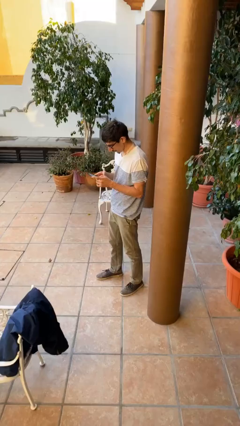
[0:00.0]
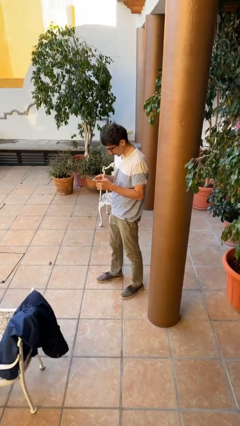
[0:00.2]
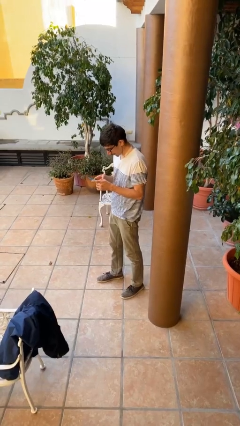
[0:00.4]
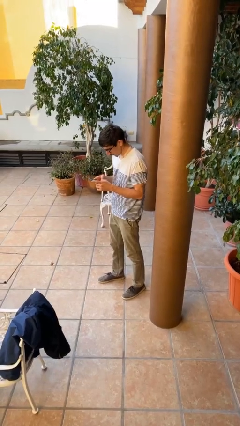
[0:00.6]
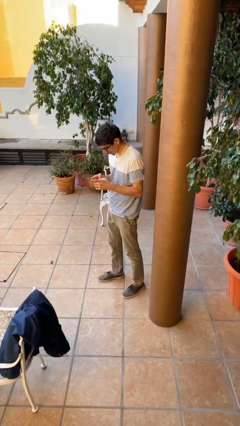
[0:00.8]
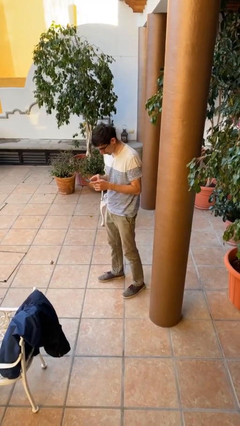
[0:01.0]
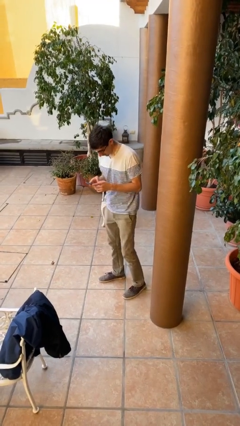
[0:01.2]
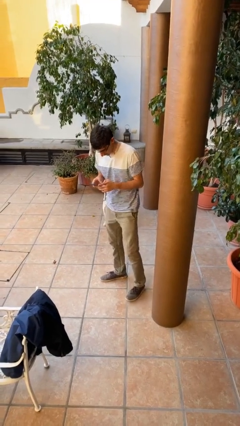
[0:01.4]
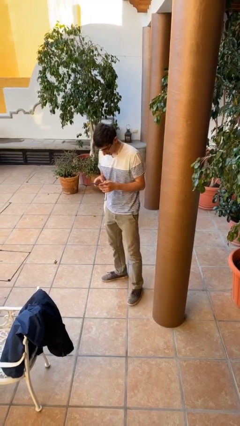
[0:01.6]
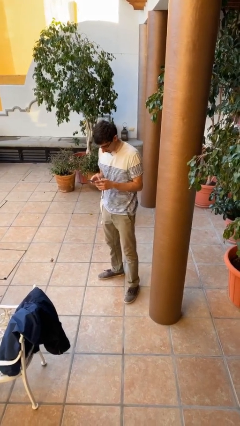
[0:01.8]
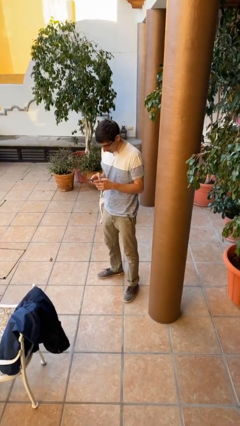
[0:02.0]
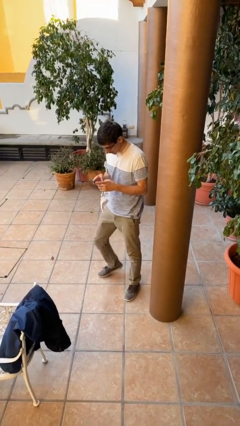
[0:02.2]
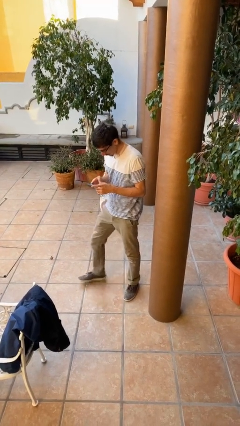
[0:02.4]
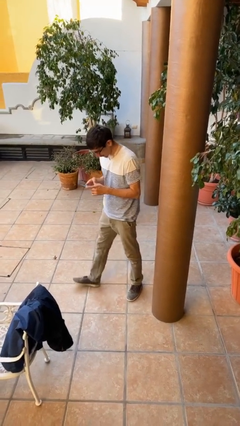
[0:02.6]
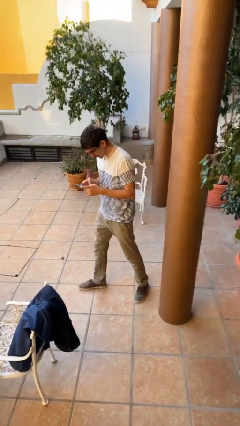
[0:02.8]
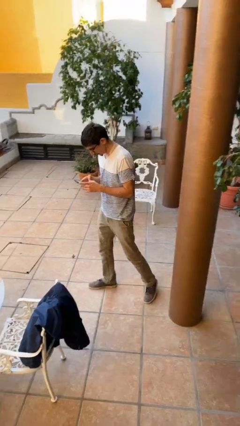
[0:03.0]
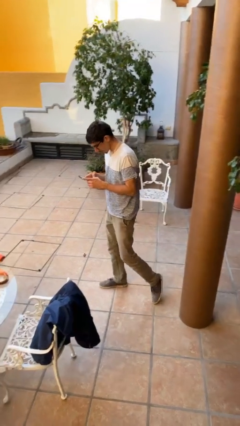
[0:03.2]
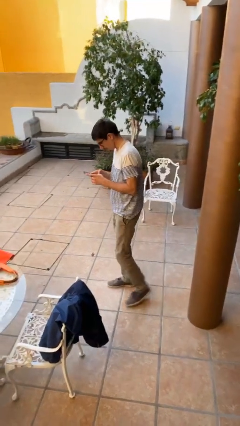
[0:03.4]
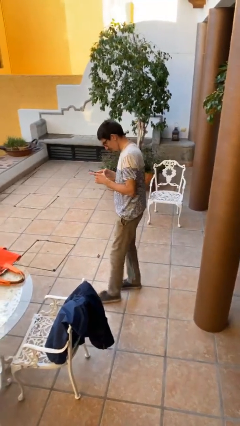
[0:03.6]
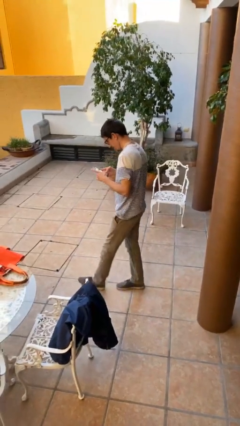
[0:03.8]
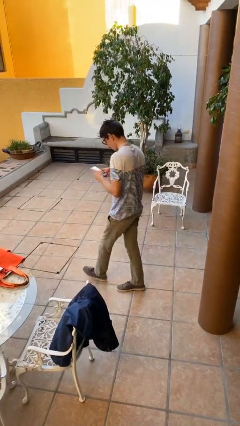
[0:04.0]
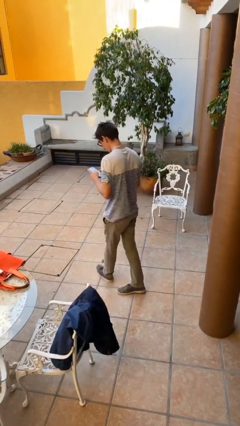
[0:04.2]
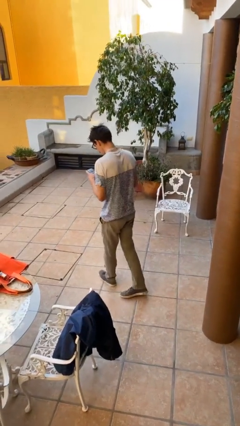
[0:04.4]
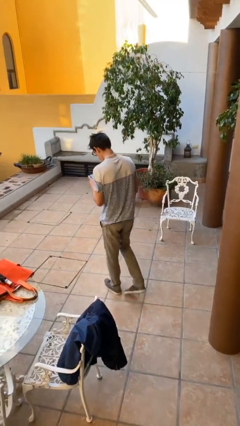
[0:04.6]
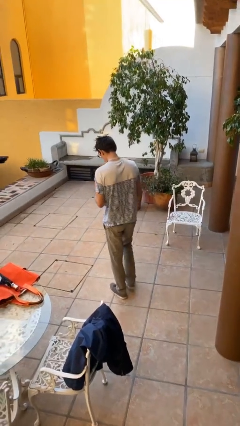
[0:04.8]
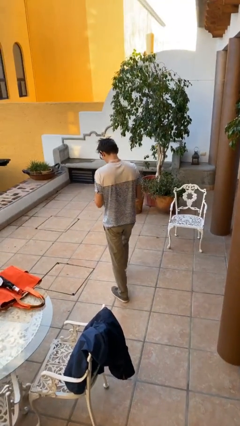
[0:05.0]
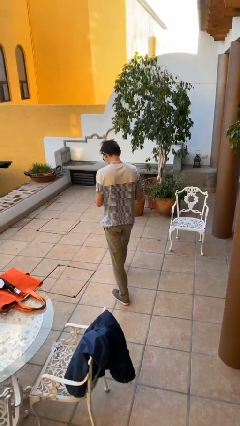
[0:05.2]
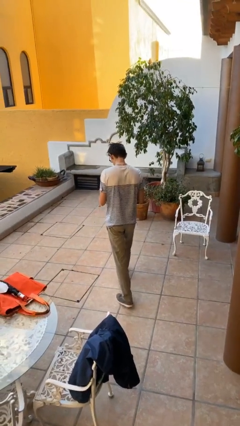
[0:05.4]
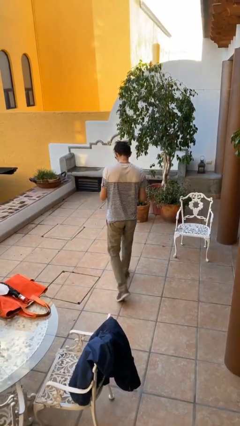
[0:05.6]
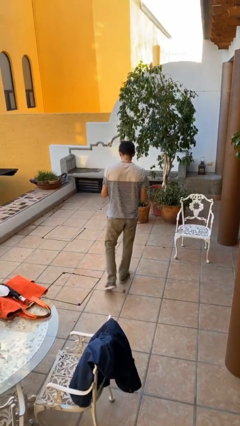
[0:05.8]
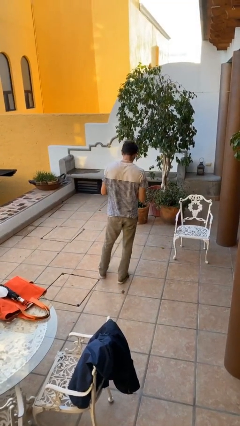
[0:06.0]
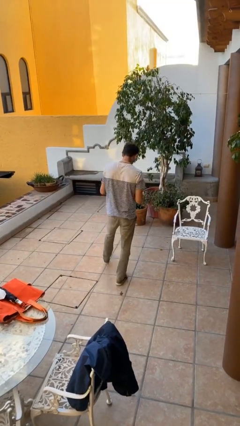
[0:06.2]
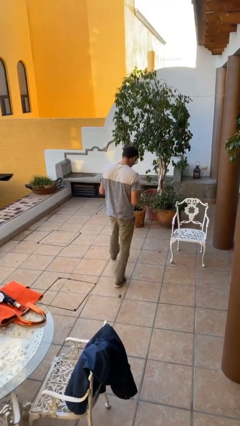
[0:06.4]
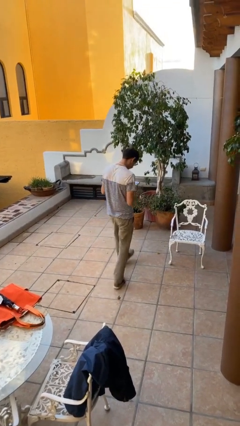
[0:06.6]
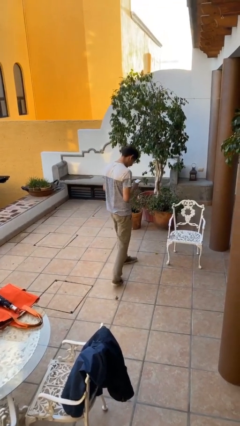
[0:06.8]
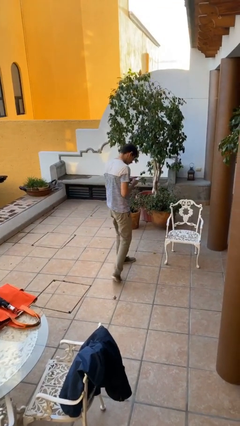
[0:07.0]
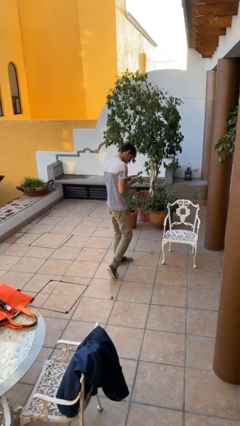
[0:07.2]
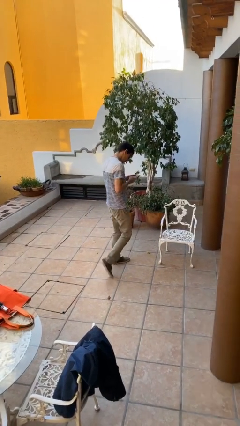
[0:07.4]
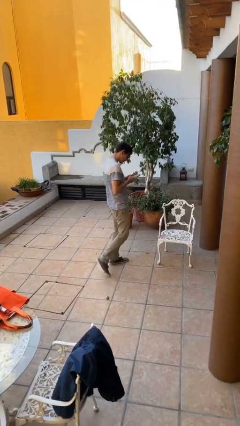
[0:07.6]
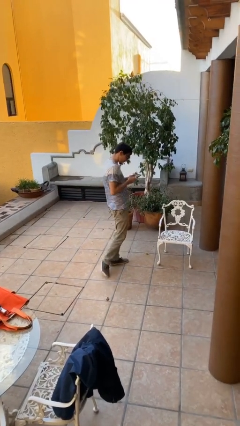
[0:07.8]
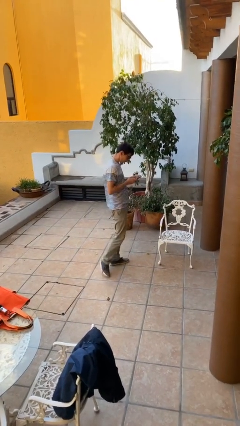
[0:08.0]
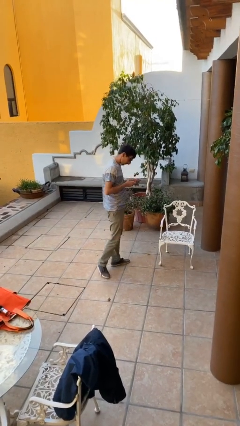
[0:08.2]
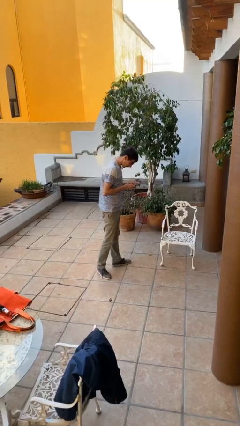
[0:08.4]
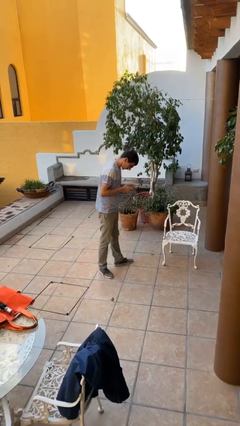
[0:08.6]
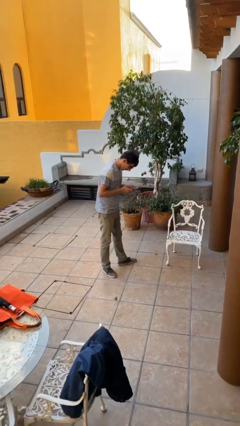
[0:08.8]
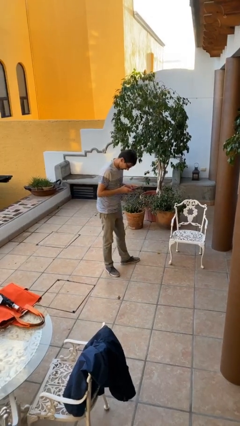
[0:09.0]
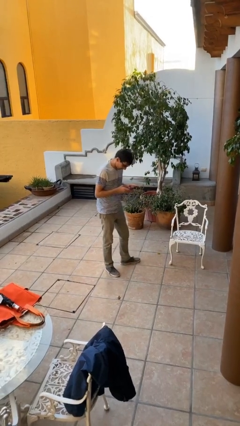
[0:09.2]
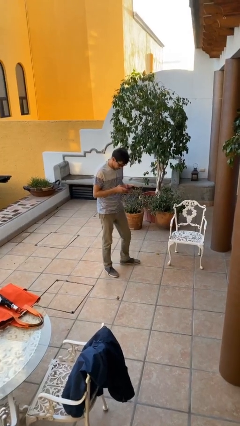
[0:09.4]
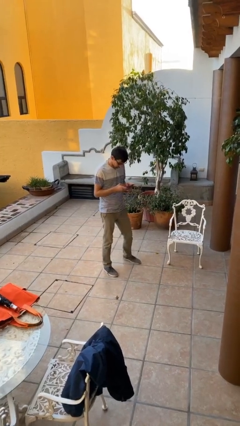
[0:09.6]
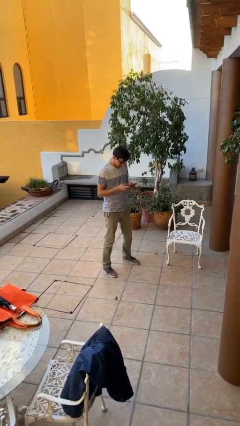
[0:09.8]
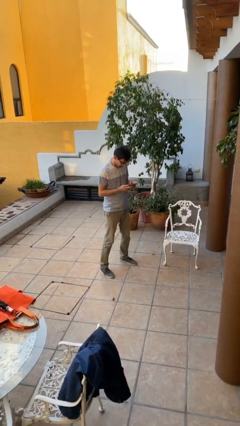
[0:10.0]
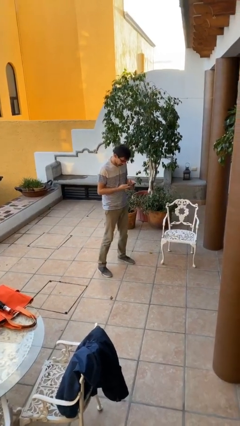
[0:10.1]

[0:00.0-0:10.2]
person texts on phone

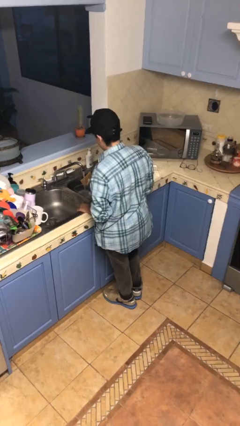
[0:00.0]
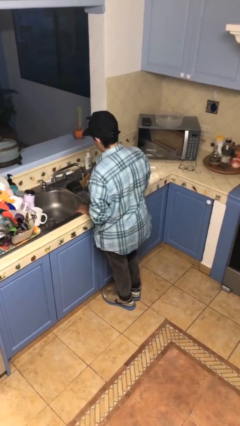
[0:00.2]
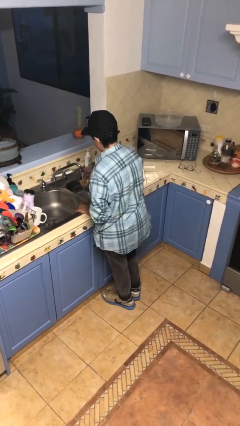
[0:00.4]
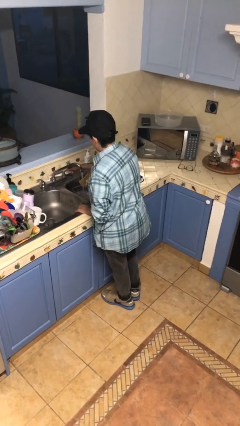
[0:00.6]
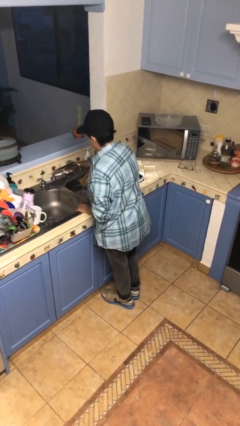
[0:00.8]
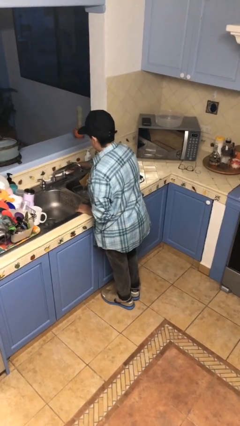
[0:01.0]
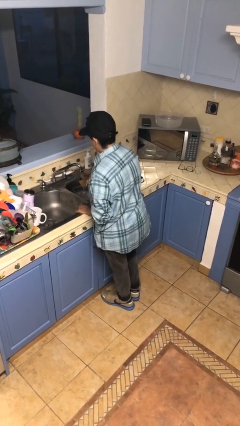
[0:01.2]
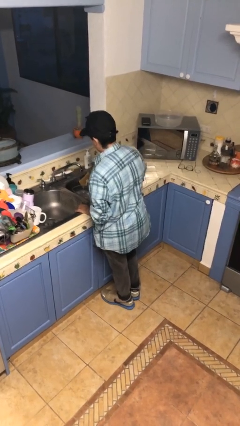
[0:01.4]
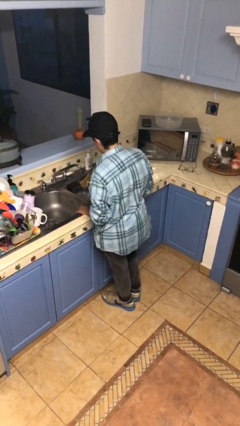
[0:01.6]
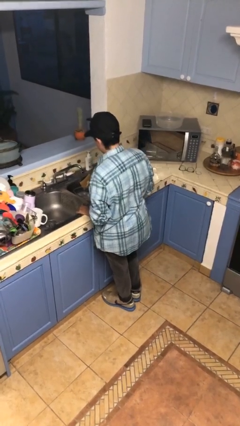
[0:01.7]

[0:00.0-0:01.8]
person turns off faucet

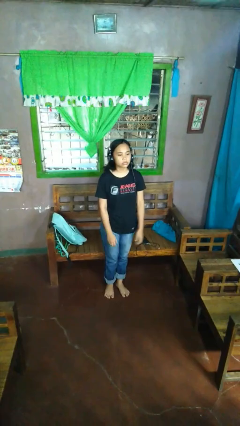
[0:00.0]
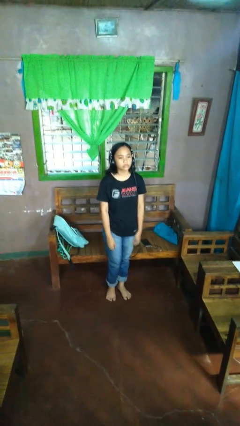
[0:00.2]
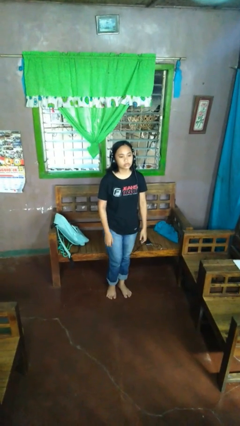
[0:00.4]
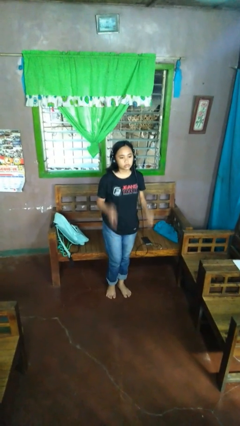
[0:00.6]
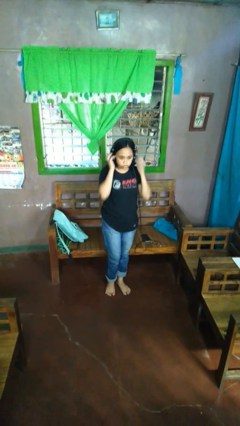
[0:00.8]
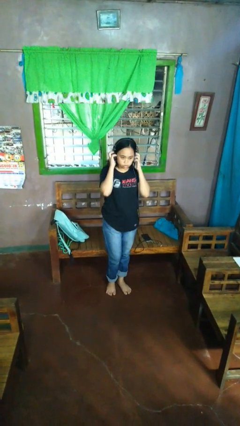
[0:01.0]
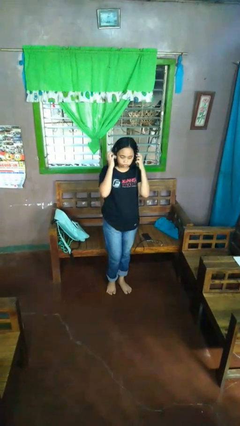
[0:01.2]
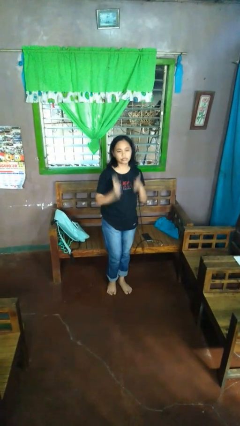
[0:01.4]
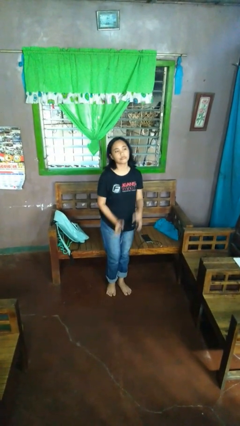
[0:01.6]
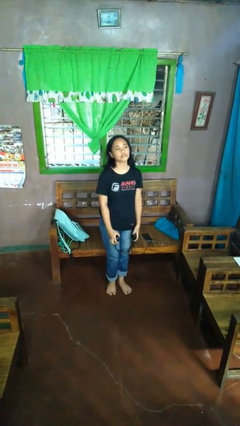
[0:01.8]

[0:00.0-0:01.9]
person takes off headphones

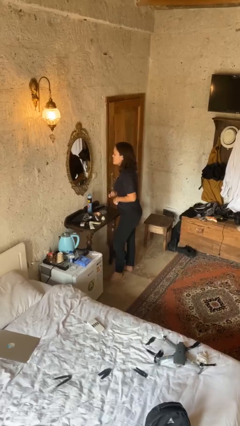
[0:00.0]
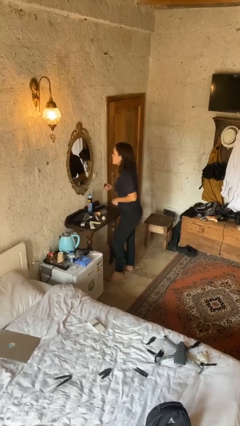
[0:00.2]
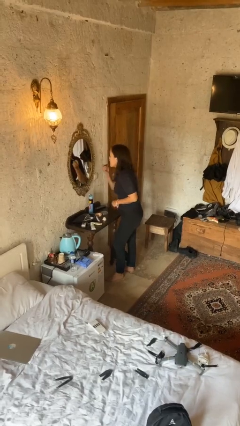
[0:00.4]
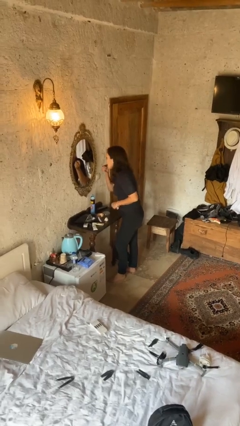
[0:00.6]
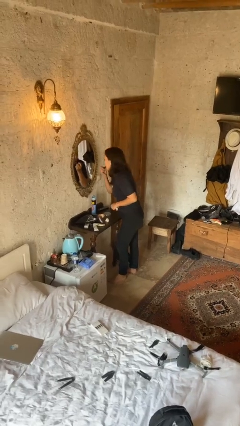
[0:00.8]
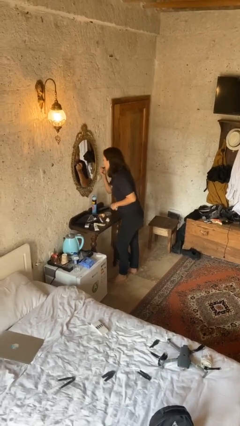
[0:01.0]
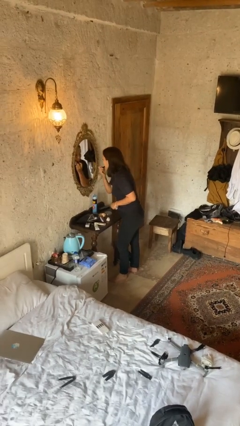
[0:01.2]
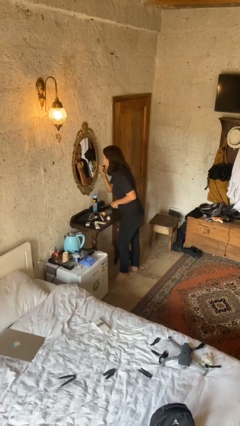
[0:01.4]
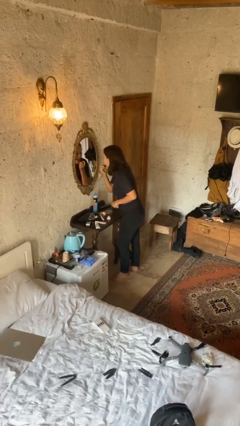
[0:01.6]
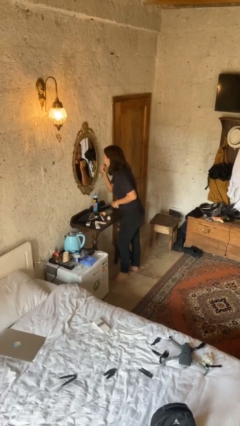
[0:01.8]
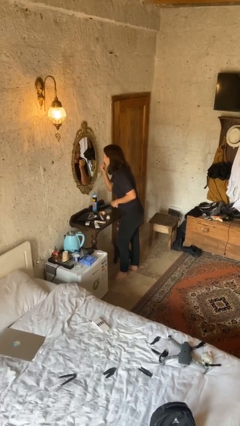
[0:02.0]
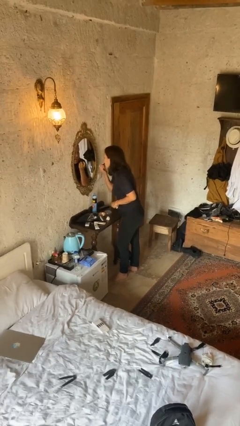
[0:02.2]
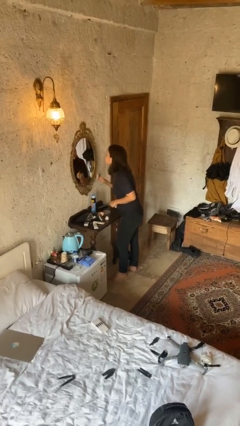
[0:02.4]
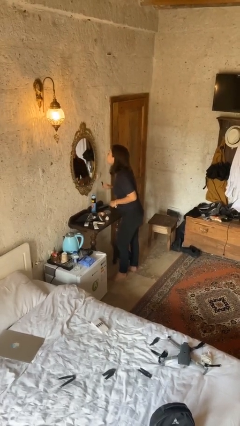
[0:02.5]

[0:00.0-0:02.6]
person applies lip makeup

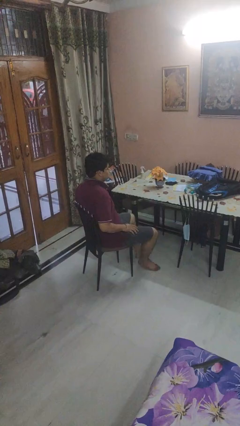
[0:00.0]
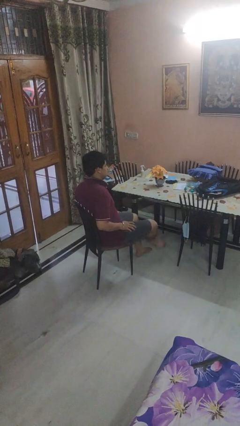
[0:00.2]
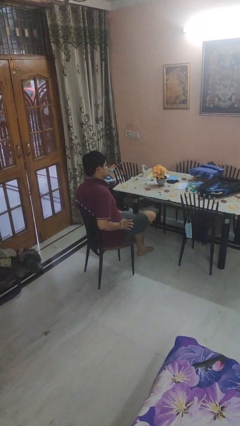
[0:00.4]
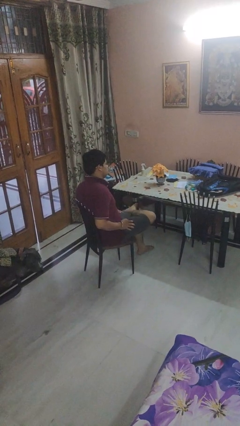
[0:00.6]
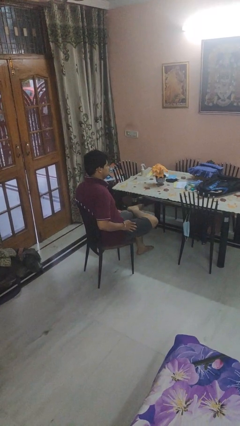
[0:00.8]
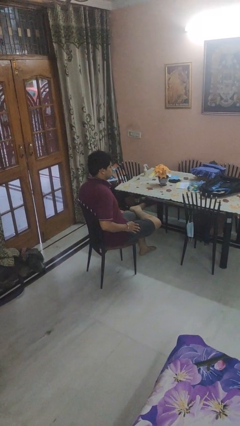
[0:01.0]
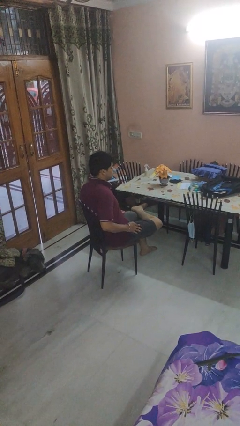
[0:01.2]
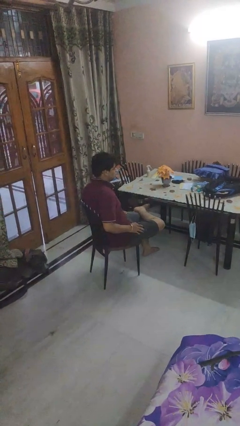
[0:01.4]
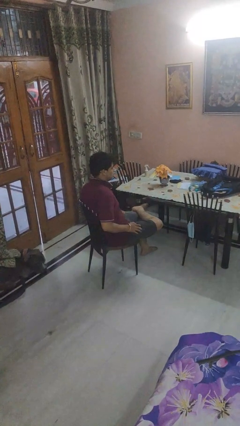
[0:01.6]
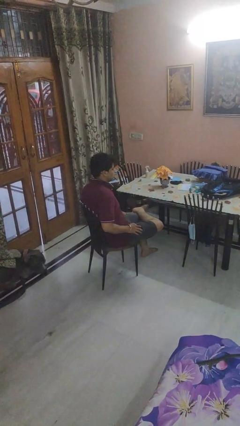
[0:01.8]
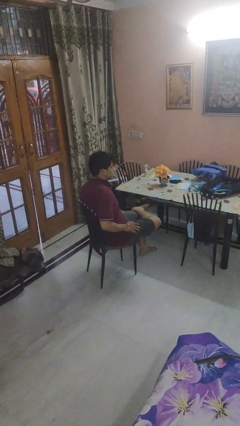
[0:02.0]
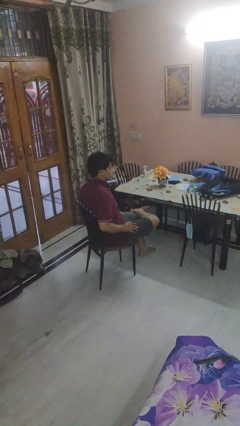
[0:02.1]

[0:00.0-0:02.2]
person crosses legs
